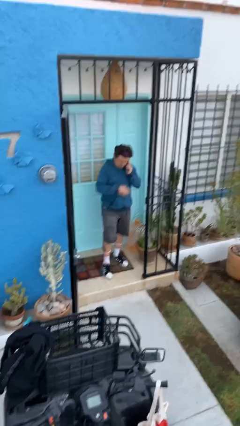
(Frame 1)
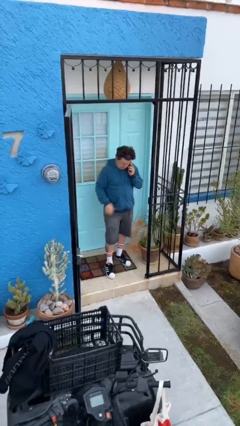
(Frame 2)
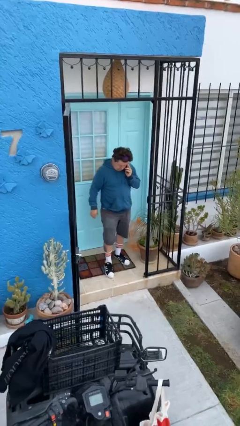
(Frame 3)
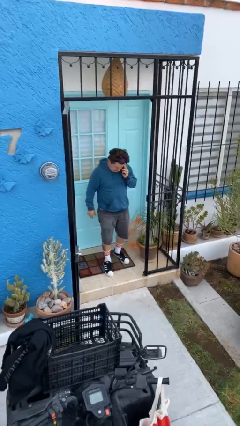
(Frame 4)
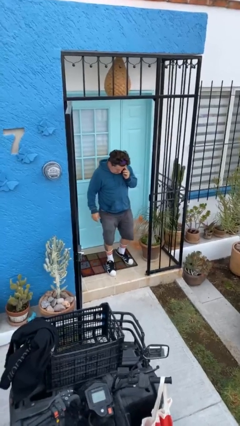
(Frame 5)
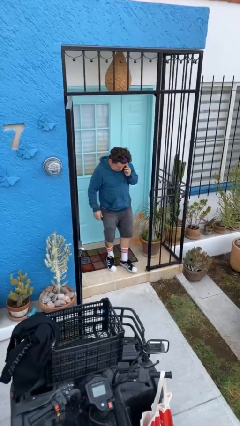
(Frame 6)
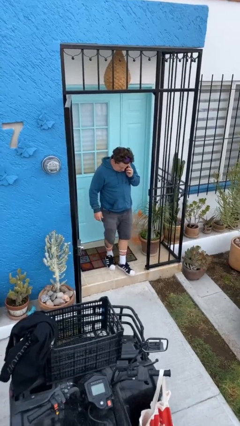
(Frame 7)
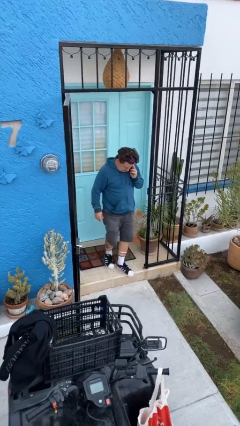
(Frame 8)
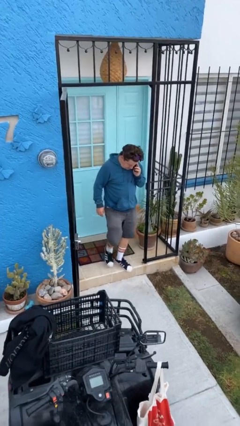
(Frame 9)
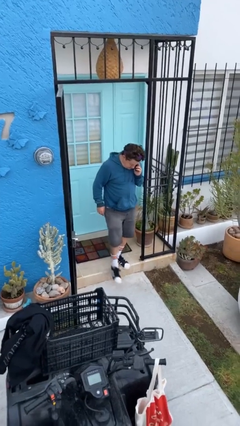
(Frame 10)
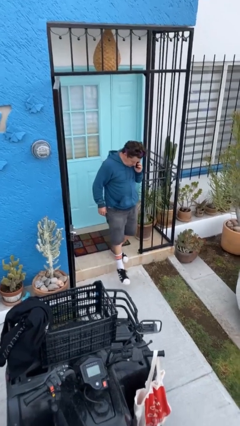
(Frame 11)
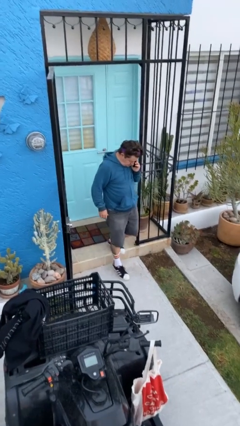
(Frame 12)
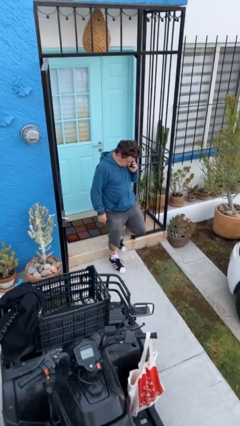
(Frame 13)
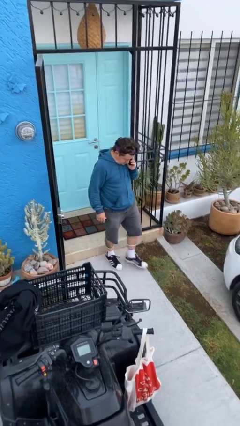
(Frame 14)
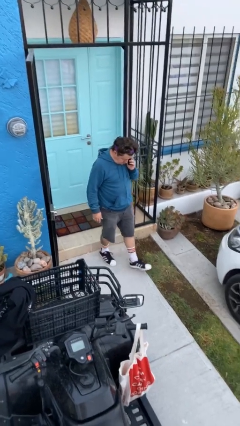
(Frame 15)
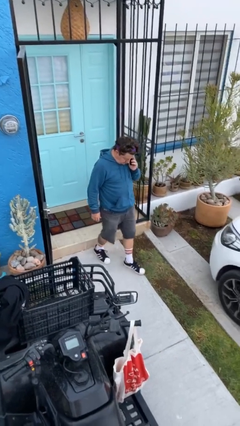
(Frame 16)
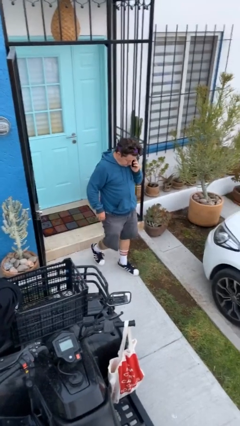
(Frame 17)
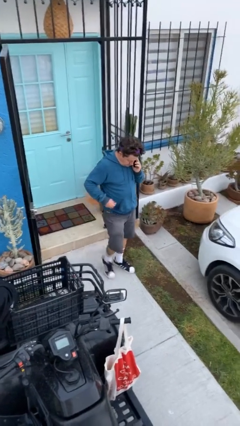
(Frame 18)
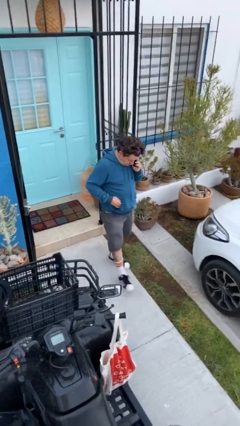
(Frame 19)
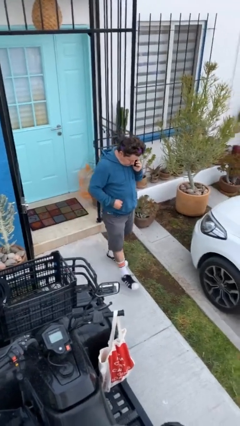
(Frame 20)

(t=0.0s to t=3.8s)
person enters scene through structure

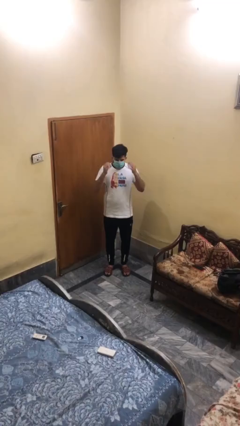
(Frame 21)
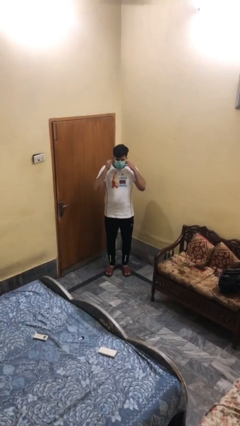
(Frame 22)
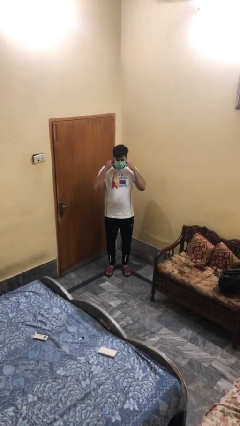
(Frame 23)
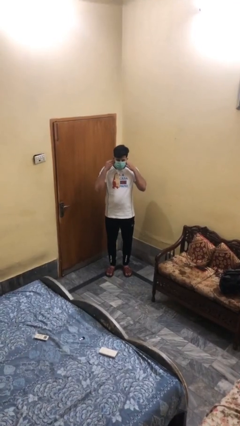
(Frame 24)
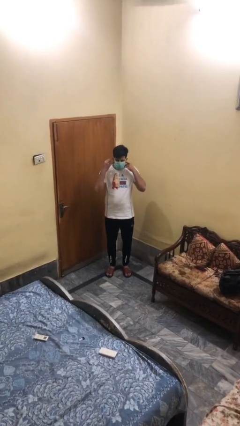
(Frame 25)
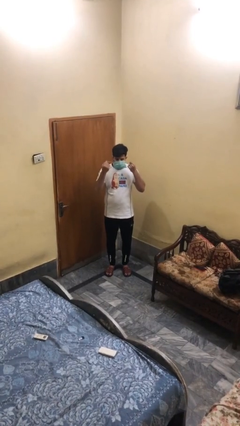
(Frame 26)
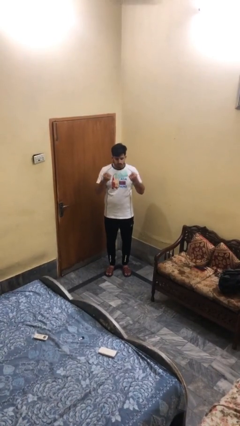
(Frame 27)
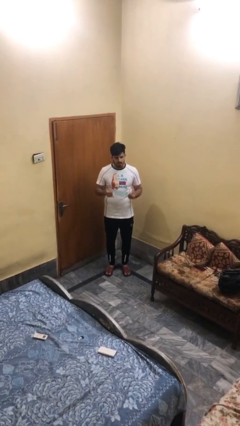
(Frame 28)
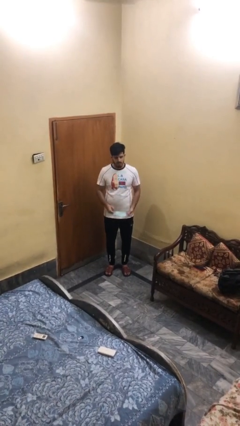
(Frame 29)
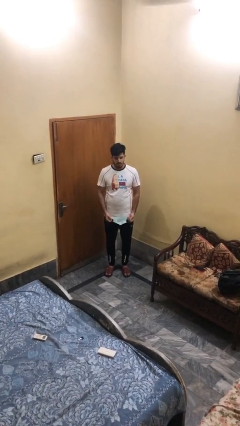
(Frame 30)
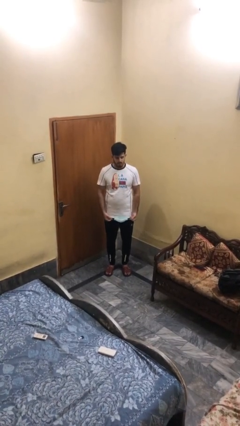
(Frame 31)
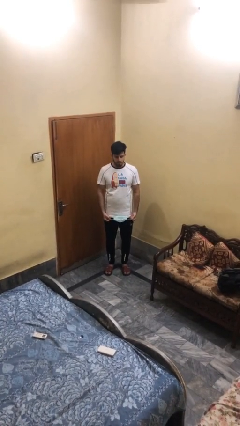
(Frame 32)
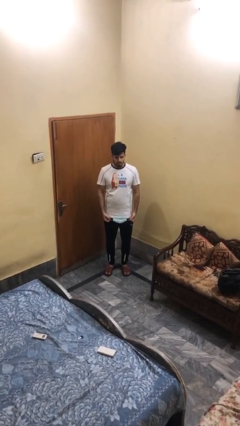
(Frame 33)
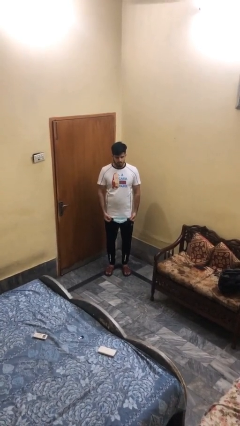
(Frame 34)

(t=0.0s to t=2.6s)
person takes off facemask

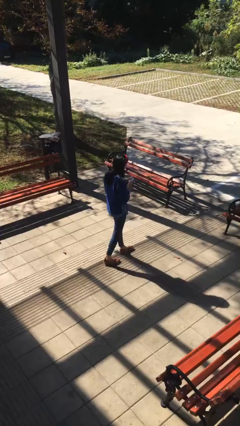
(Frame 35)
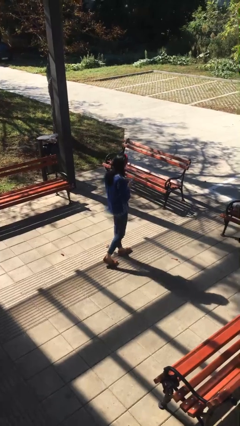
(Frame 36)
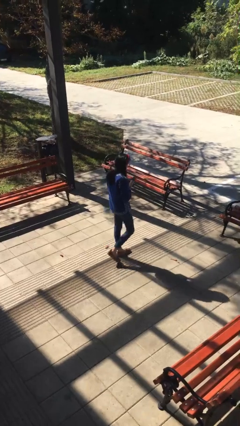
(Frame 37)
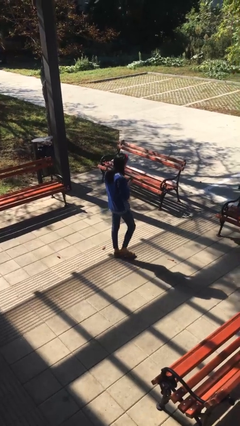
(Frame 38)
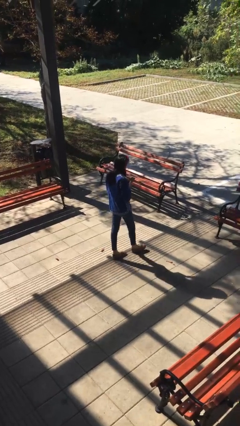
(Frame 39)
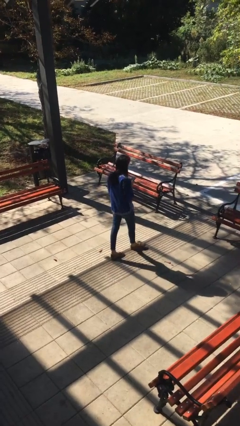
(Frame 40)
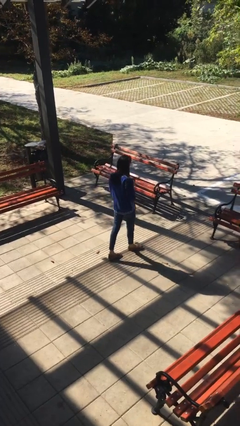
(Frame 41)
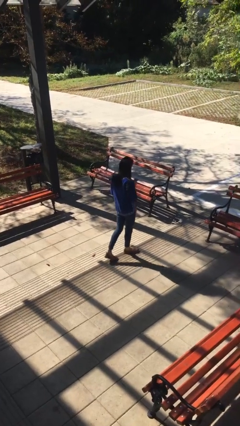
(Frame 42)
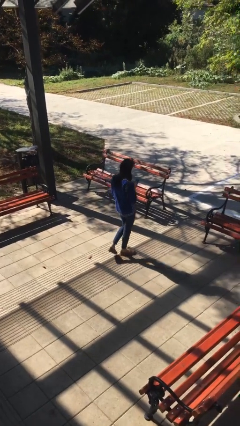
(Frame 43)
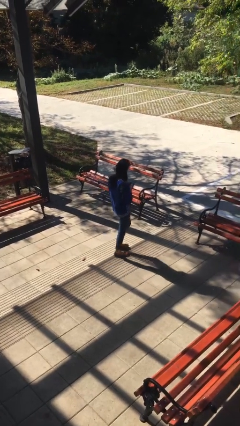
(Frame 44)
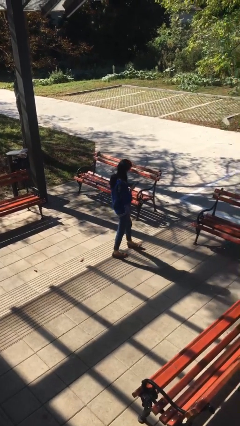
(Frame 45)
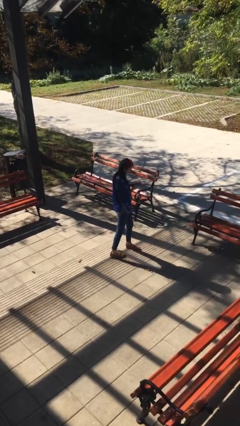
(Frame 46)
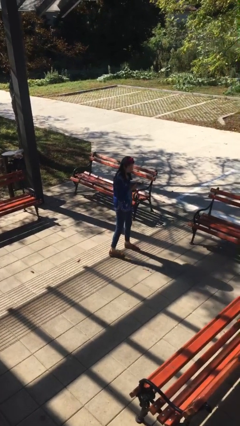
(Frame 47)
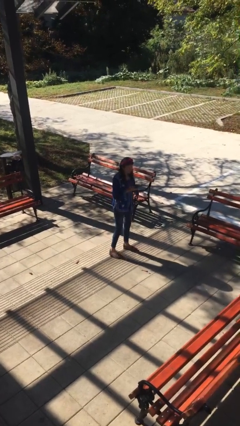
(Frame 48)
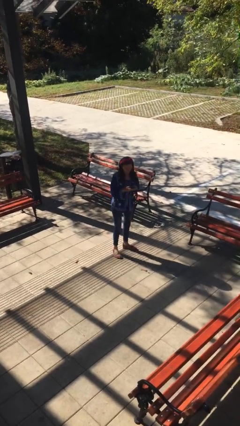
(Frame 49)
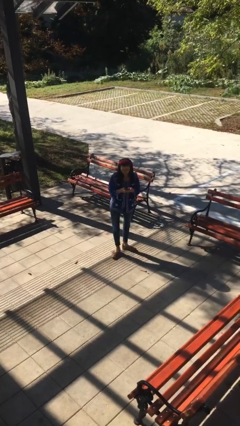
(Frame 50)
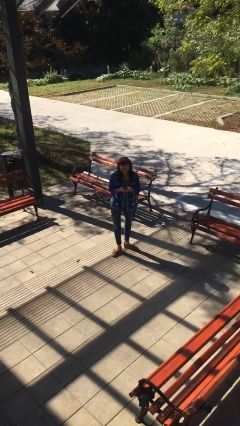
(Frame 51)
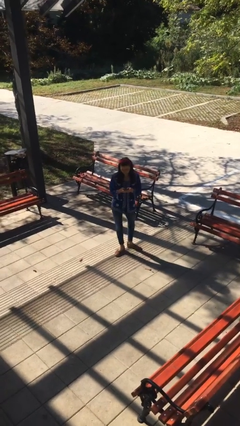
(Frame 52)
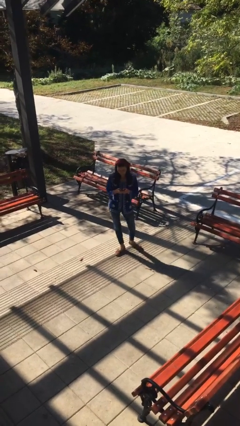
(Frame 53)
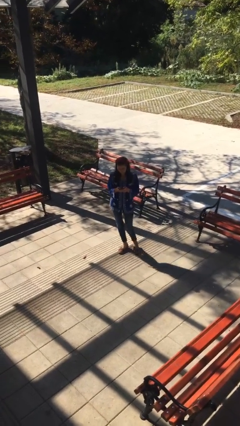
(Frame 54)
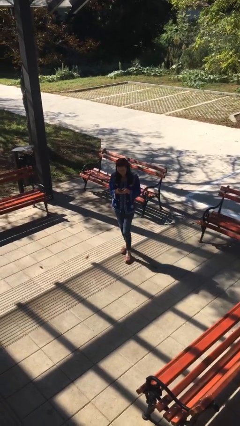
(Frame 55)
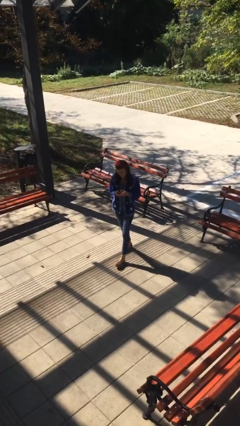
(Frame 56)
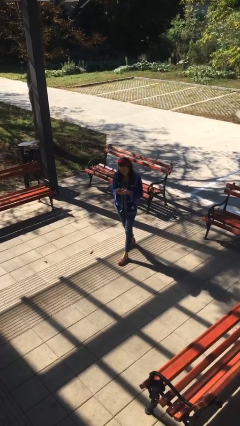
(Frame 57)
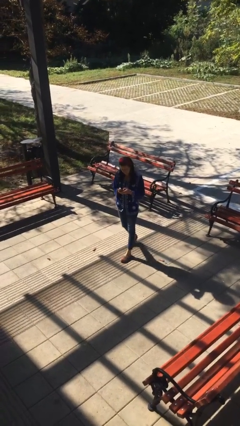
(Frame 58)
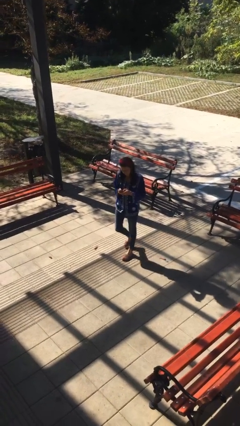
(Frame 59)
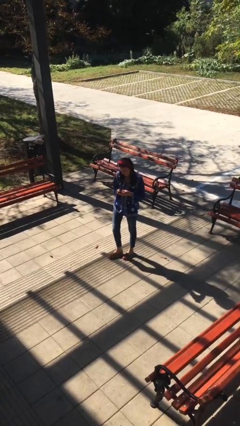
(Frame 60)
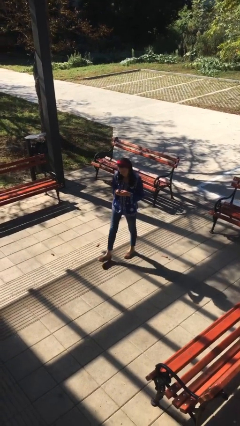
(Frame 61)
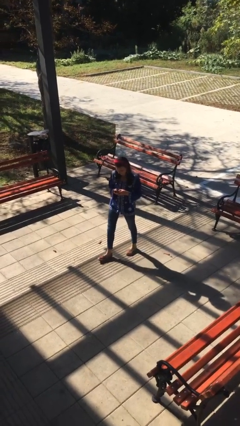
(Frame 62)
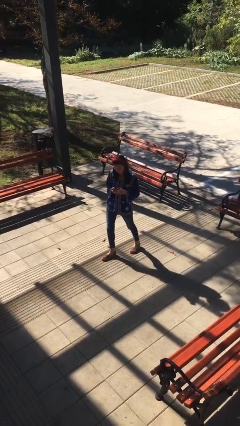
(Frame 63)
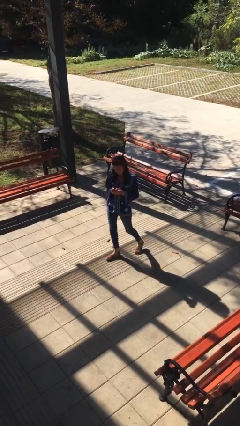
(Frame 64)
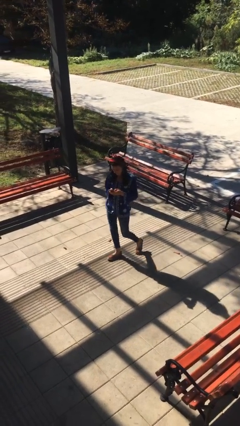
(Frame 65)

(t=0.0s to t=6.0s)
person texts on phone

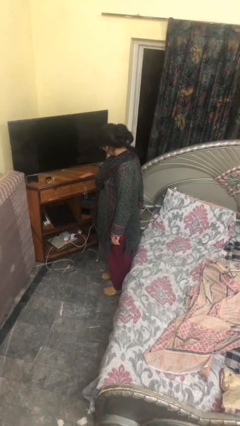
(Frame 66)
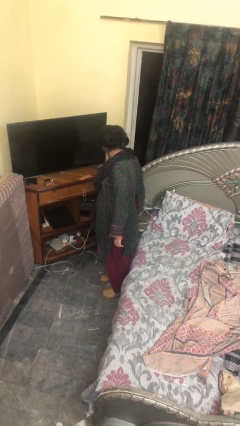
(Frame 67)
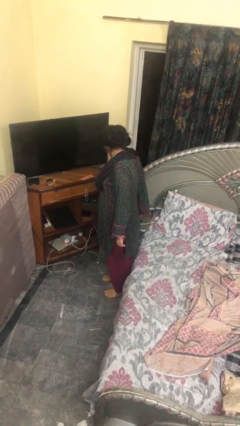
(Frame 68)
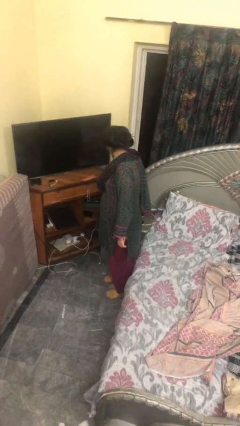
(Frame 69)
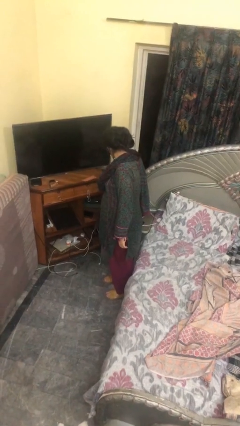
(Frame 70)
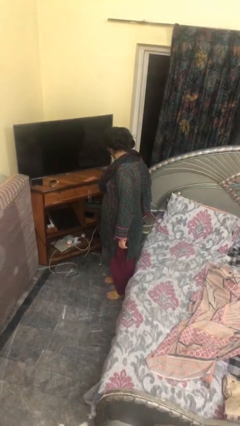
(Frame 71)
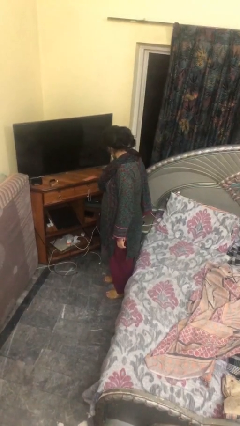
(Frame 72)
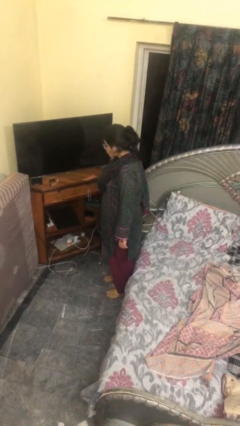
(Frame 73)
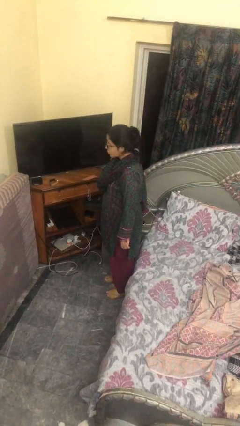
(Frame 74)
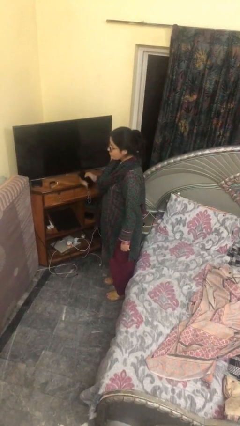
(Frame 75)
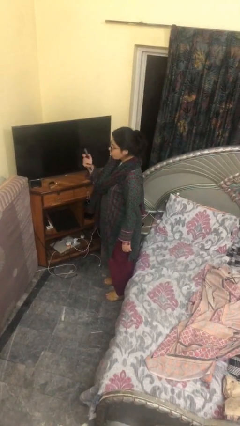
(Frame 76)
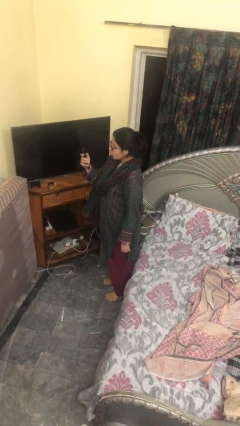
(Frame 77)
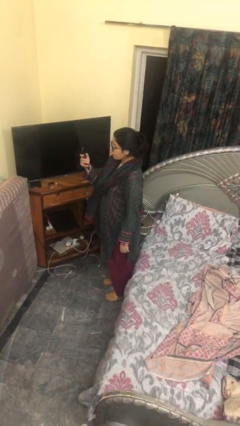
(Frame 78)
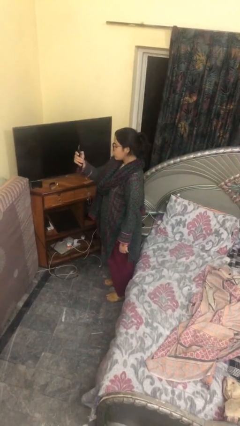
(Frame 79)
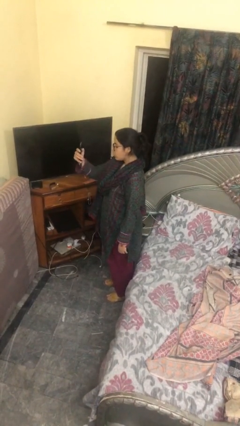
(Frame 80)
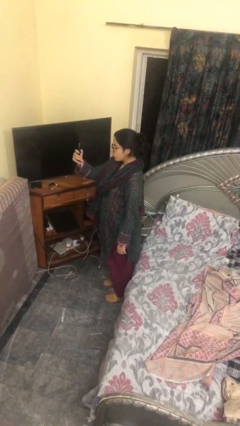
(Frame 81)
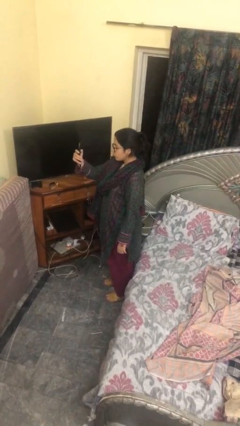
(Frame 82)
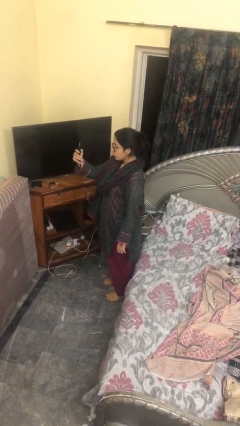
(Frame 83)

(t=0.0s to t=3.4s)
person takes phone from pocket

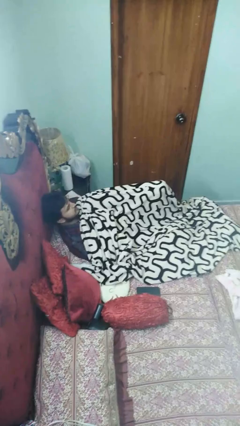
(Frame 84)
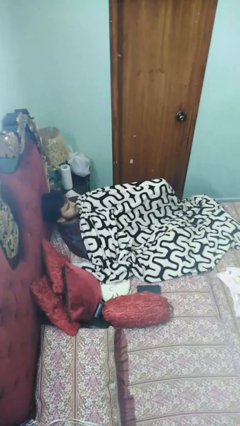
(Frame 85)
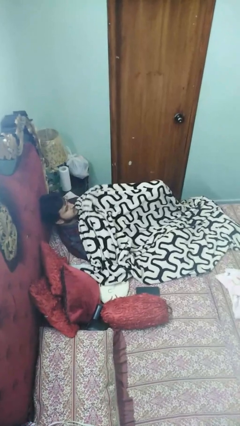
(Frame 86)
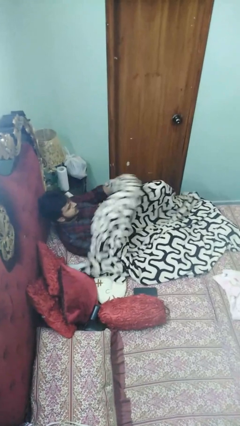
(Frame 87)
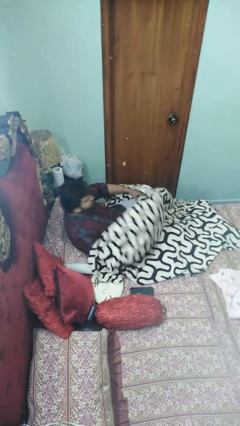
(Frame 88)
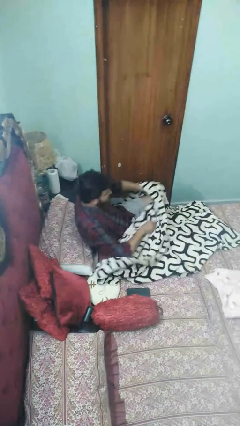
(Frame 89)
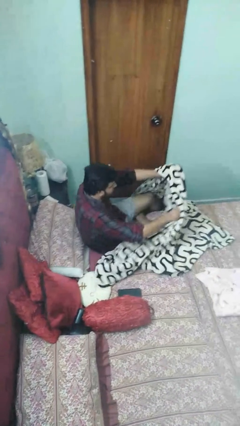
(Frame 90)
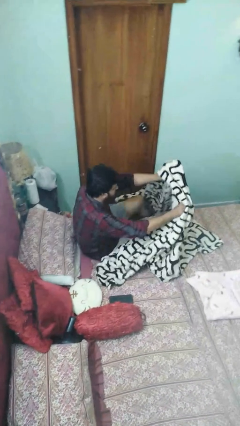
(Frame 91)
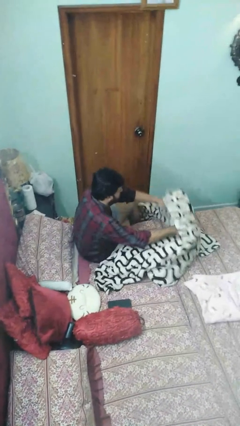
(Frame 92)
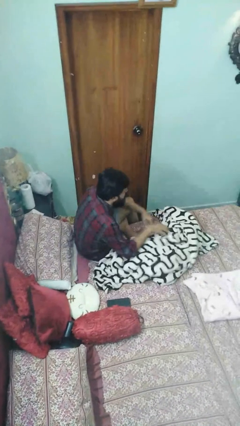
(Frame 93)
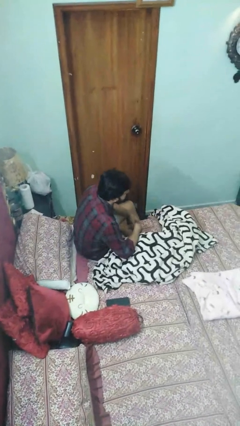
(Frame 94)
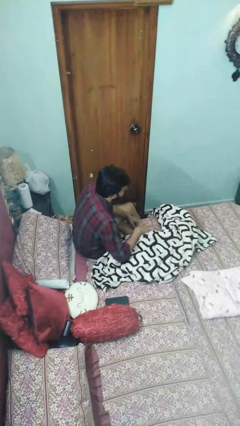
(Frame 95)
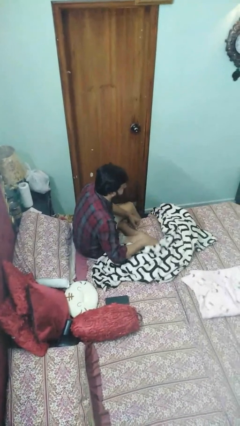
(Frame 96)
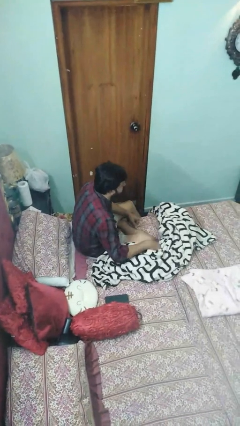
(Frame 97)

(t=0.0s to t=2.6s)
person uncovers with blanket
